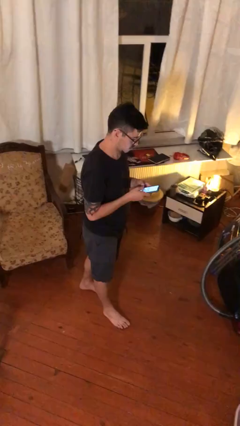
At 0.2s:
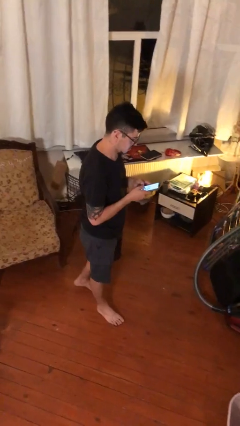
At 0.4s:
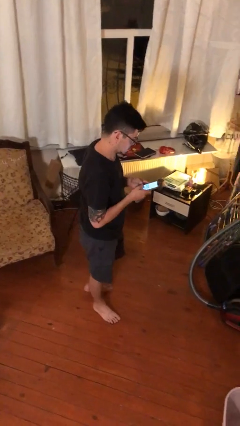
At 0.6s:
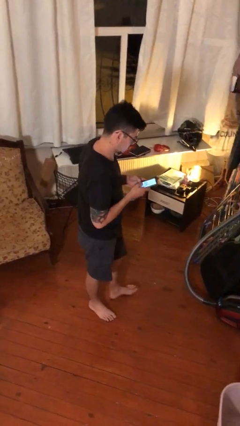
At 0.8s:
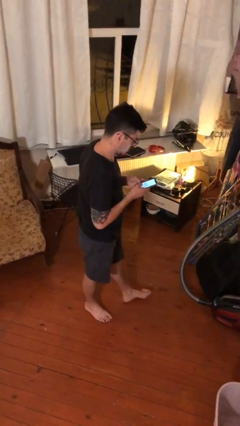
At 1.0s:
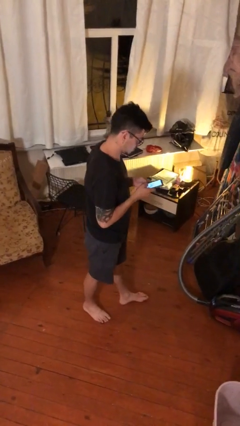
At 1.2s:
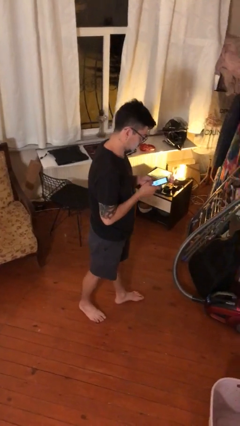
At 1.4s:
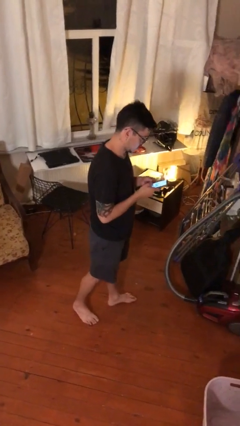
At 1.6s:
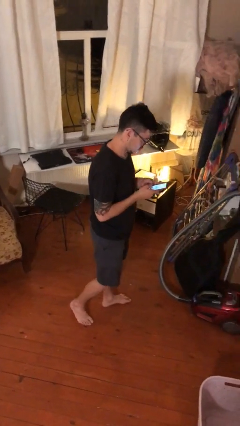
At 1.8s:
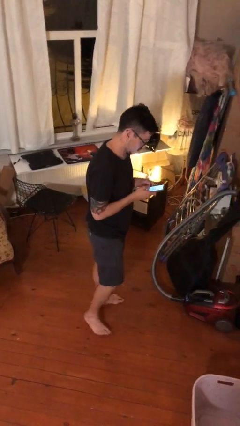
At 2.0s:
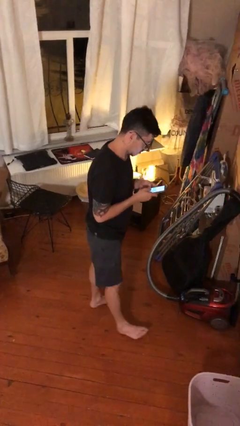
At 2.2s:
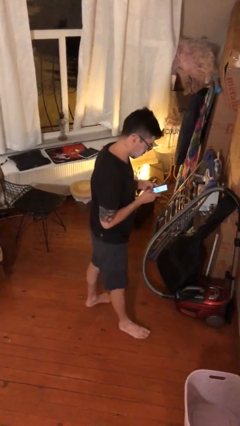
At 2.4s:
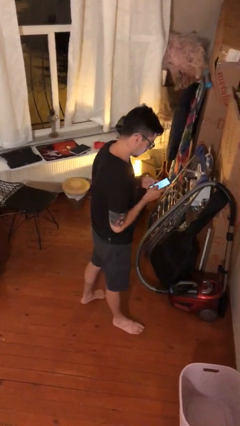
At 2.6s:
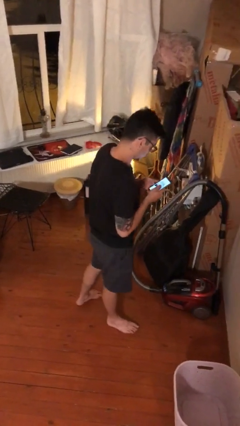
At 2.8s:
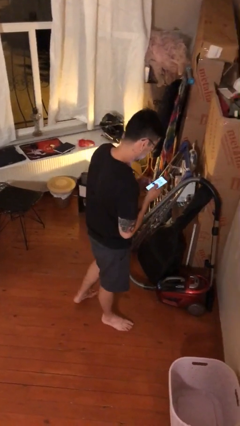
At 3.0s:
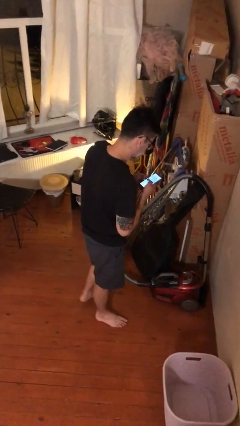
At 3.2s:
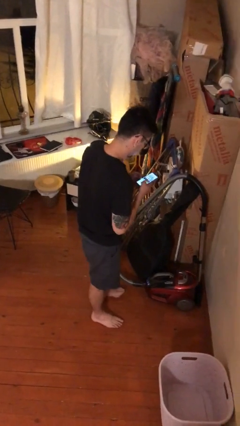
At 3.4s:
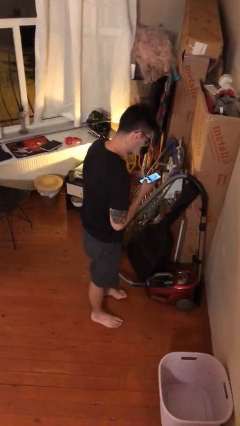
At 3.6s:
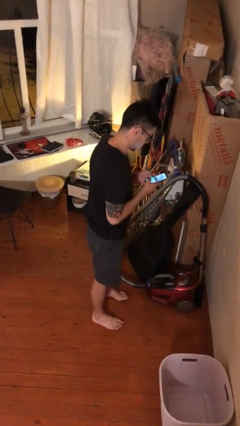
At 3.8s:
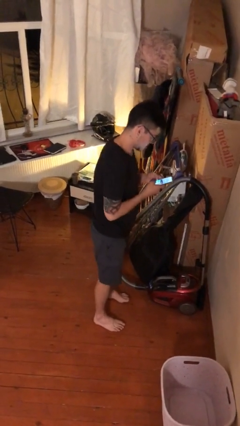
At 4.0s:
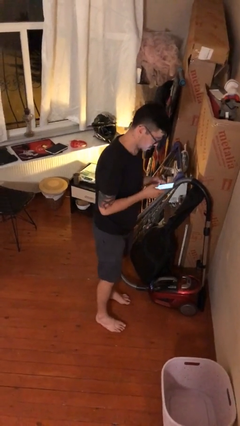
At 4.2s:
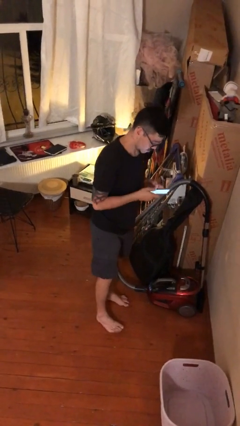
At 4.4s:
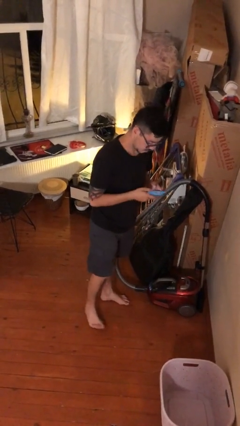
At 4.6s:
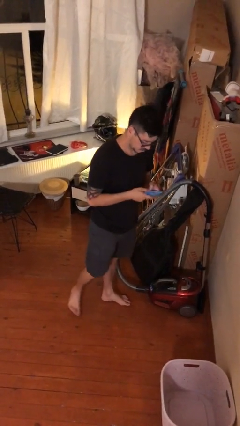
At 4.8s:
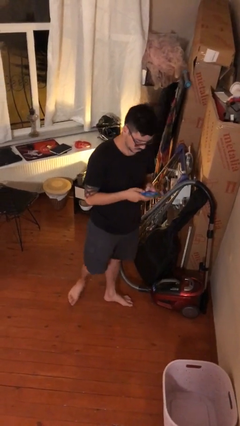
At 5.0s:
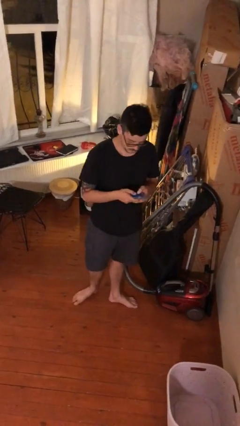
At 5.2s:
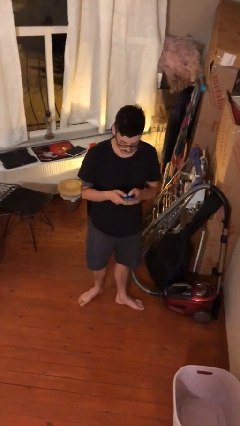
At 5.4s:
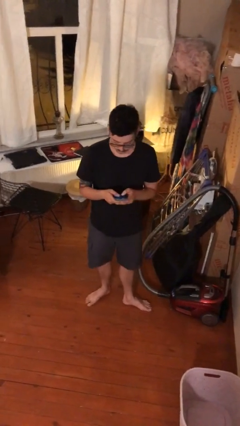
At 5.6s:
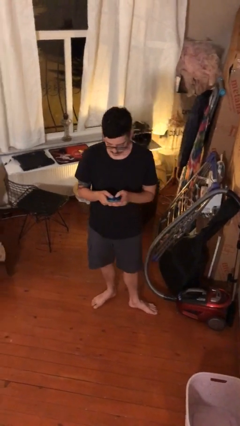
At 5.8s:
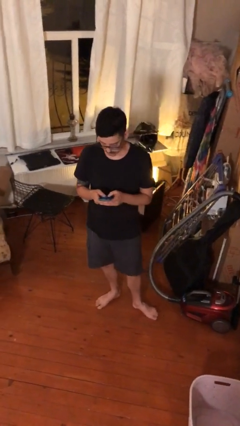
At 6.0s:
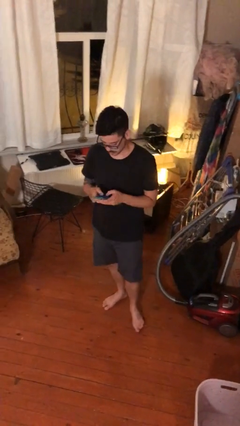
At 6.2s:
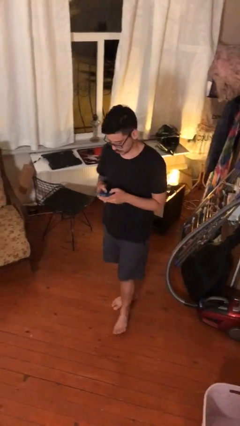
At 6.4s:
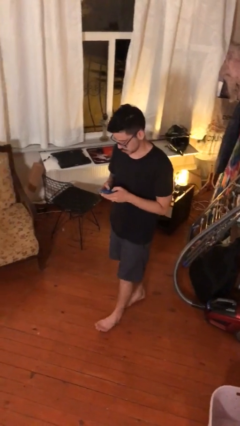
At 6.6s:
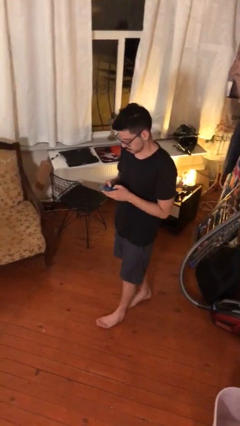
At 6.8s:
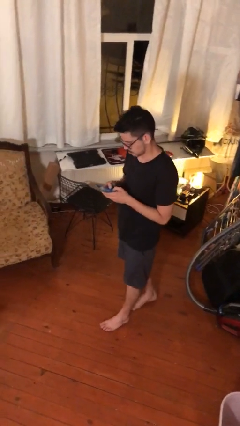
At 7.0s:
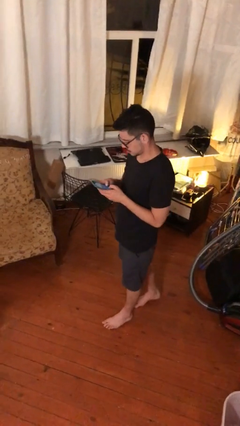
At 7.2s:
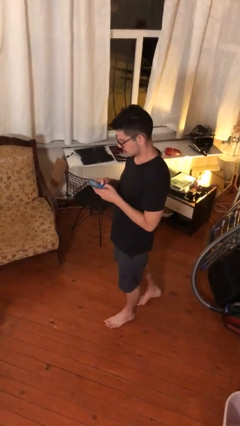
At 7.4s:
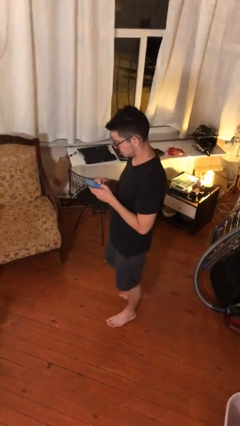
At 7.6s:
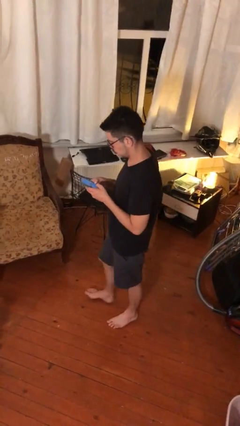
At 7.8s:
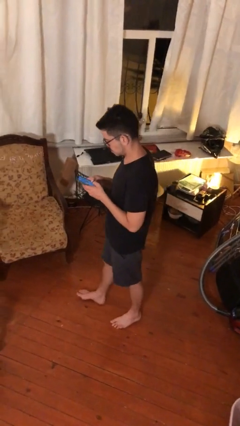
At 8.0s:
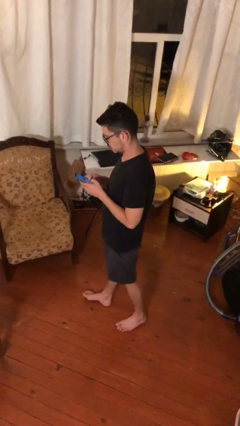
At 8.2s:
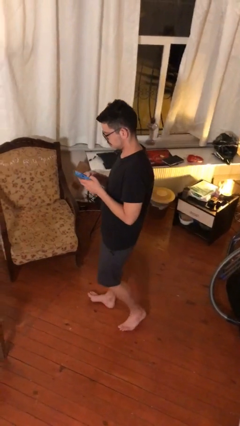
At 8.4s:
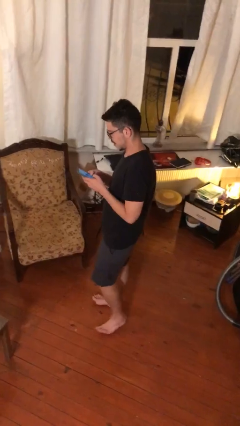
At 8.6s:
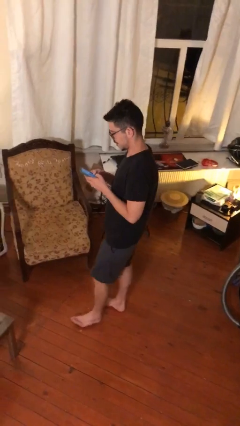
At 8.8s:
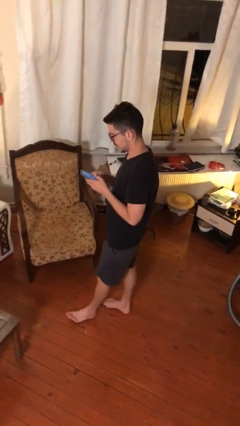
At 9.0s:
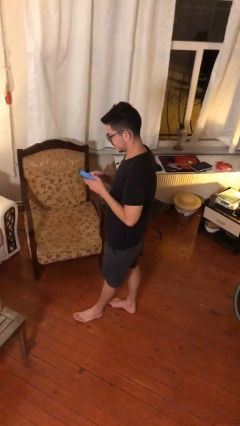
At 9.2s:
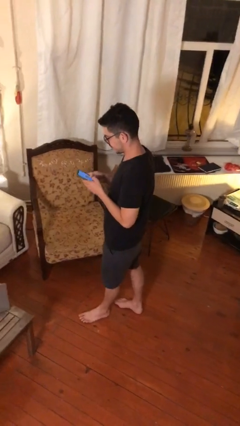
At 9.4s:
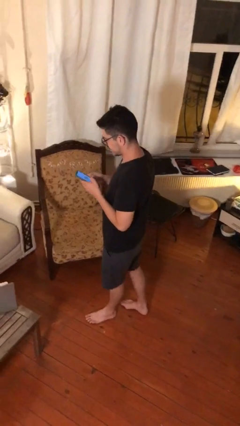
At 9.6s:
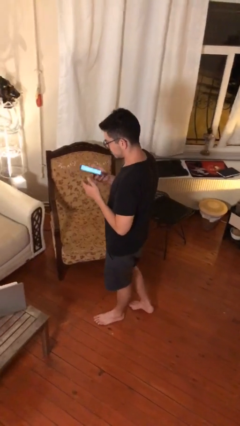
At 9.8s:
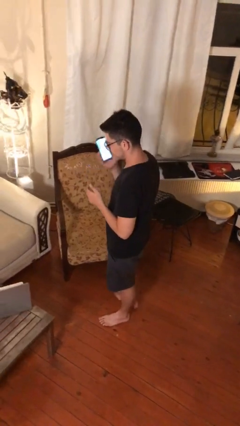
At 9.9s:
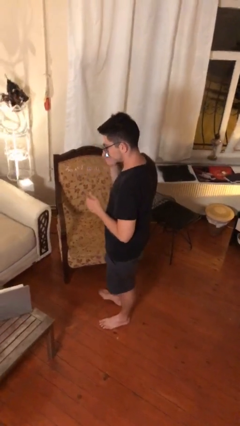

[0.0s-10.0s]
person texts on phone

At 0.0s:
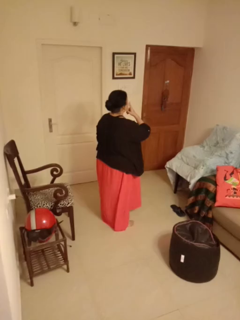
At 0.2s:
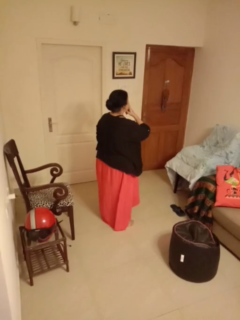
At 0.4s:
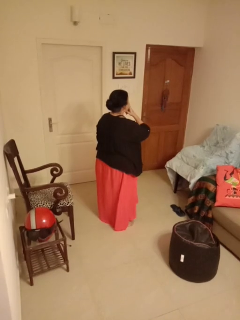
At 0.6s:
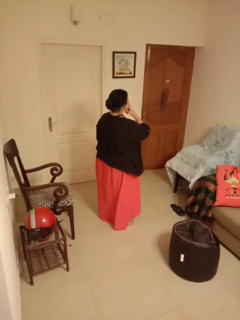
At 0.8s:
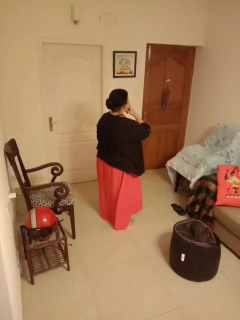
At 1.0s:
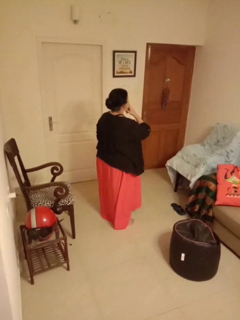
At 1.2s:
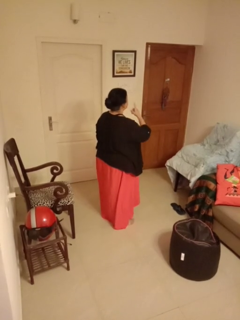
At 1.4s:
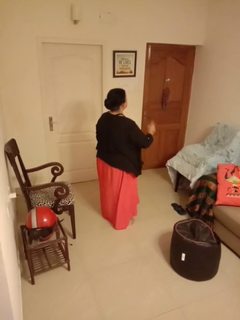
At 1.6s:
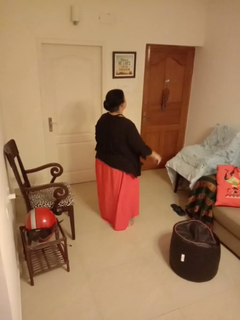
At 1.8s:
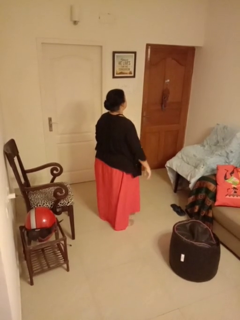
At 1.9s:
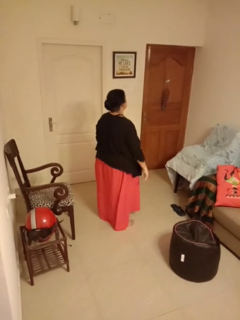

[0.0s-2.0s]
person gestures be quiet

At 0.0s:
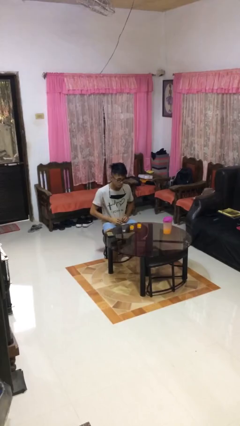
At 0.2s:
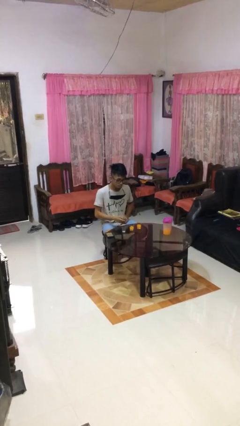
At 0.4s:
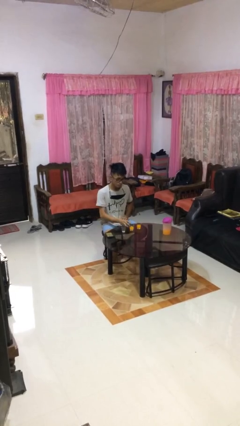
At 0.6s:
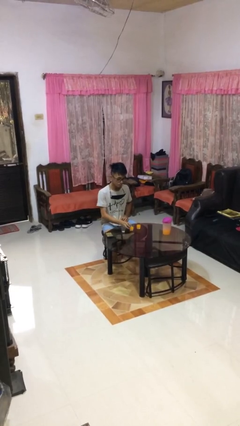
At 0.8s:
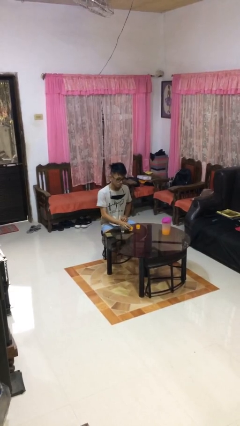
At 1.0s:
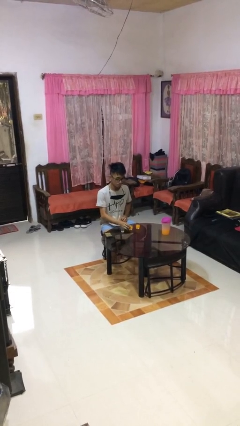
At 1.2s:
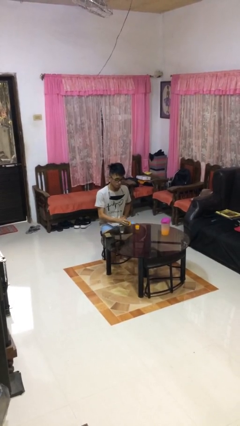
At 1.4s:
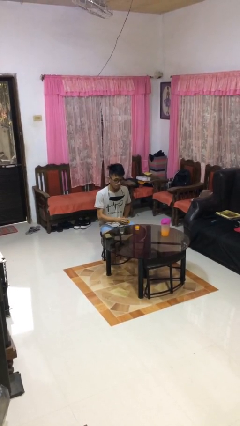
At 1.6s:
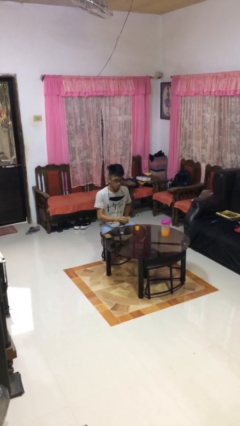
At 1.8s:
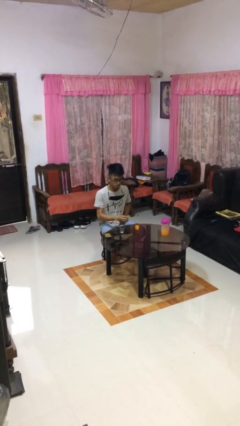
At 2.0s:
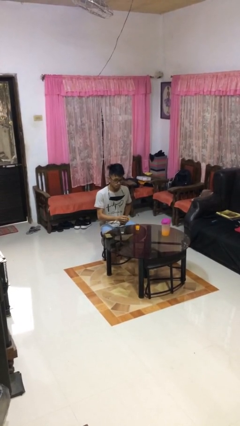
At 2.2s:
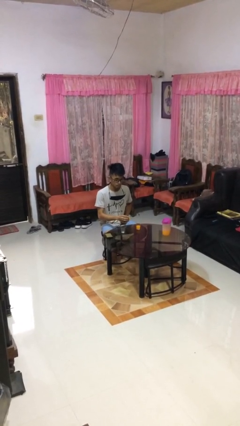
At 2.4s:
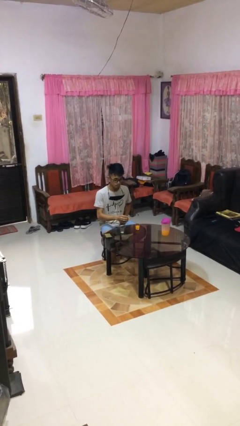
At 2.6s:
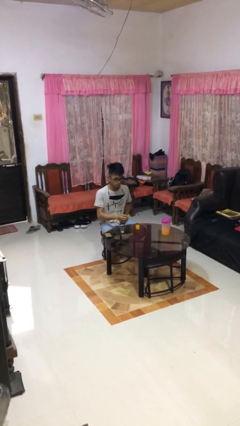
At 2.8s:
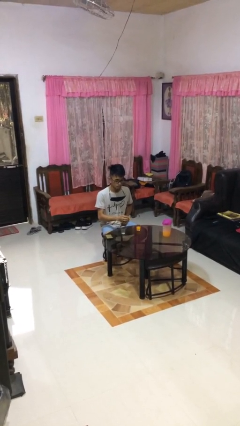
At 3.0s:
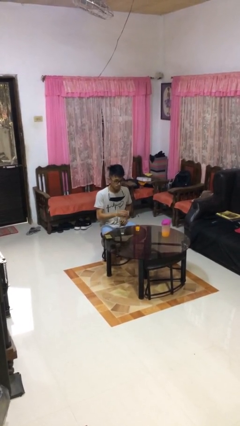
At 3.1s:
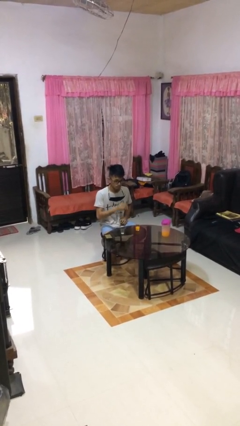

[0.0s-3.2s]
person picks up object from table

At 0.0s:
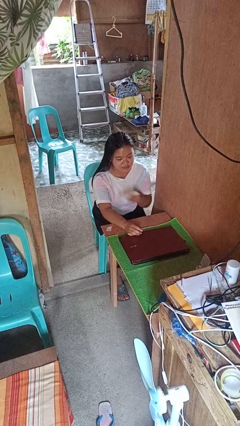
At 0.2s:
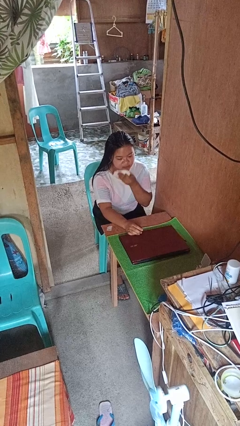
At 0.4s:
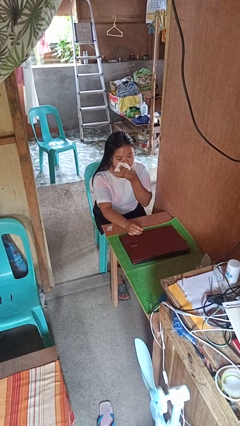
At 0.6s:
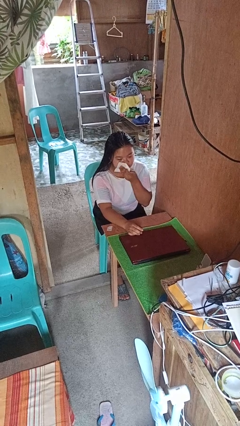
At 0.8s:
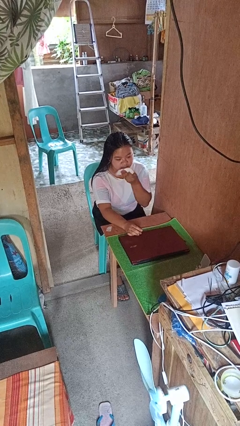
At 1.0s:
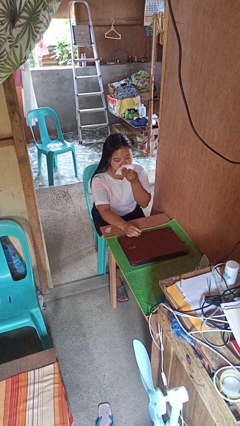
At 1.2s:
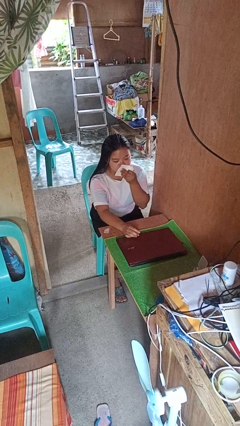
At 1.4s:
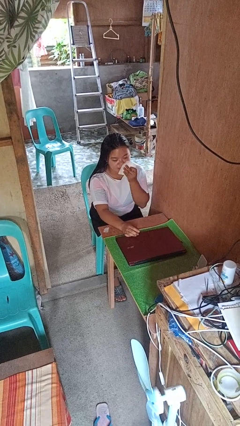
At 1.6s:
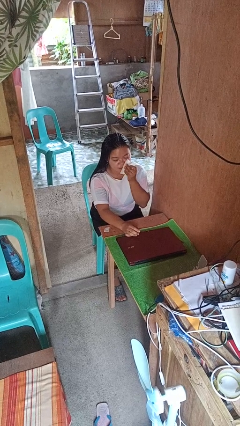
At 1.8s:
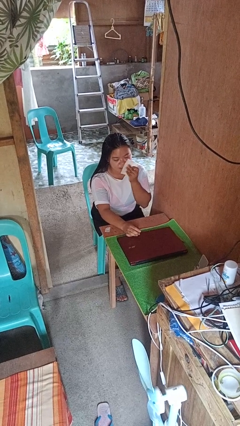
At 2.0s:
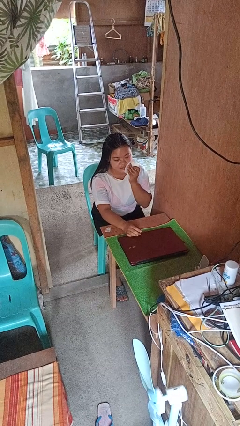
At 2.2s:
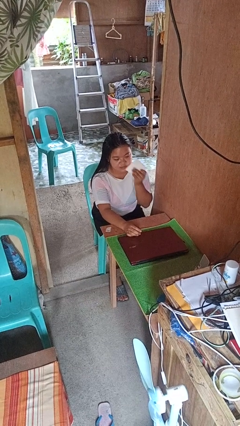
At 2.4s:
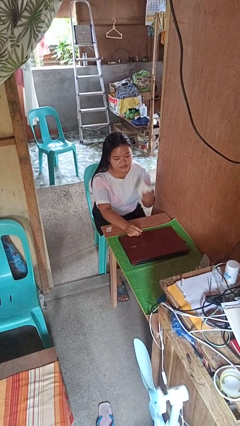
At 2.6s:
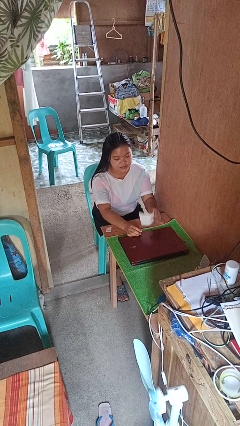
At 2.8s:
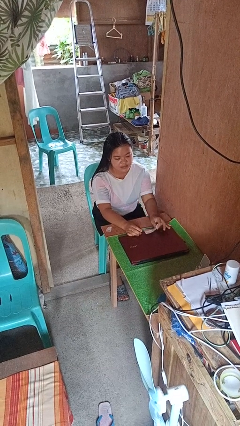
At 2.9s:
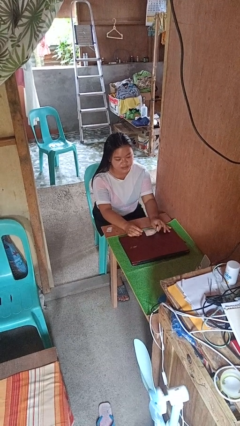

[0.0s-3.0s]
person wipes mouth with napkin
